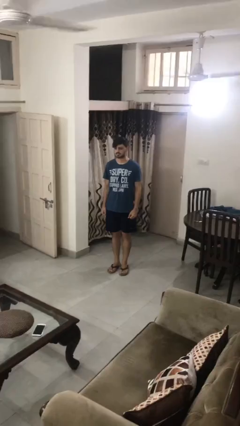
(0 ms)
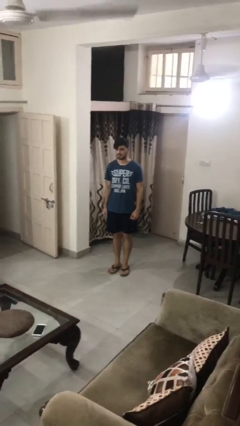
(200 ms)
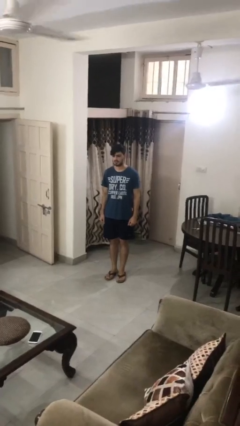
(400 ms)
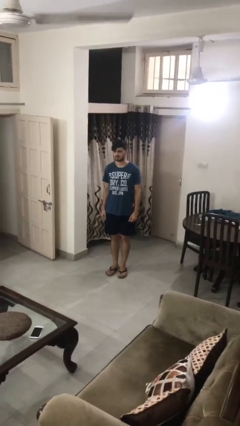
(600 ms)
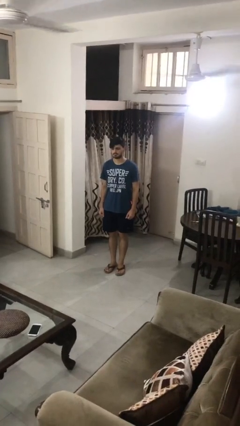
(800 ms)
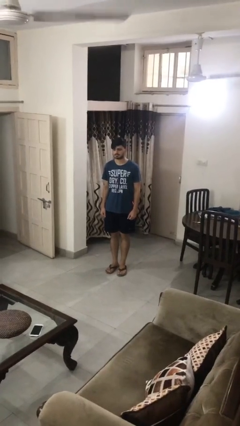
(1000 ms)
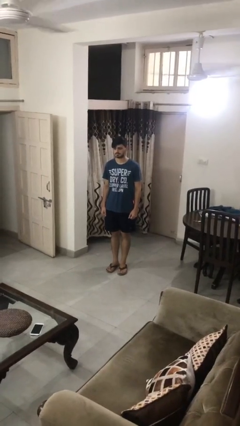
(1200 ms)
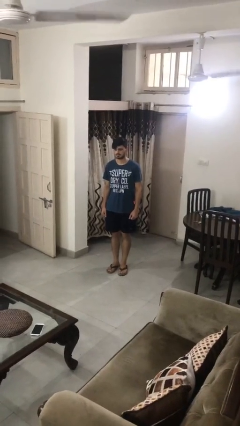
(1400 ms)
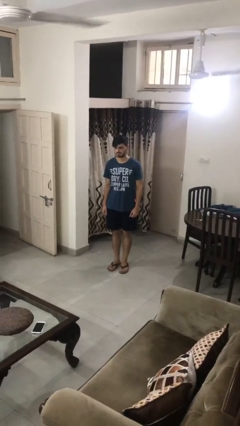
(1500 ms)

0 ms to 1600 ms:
person bows

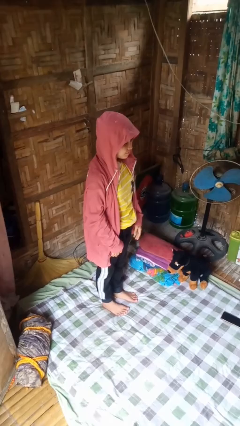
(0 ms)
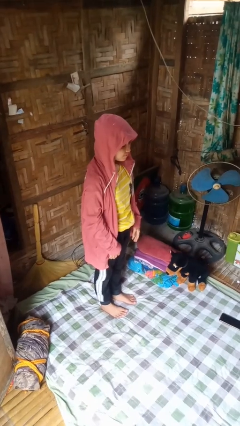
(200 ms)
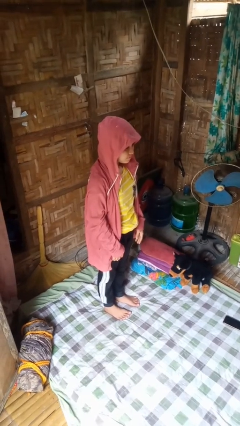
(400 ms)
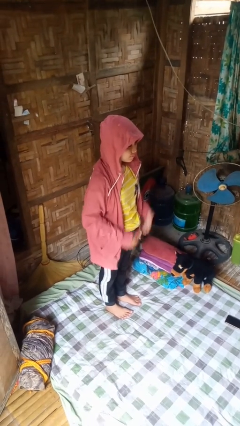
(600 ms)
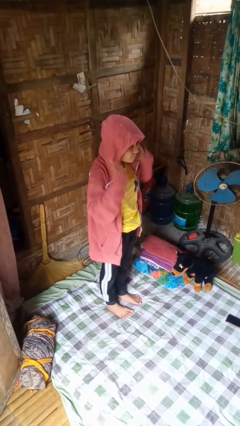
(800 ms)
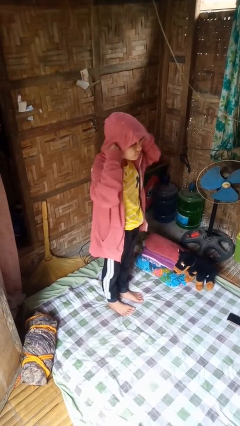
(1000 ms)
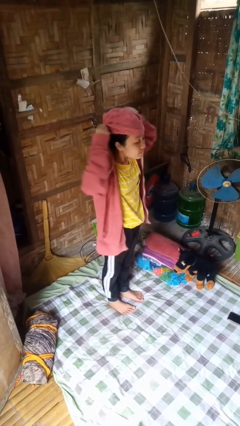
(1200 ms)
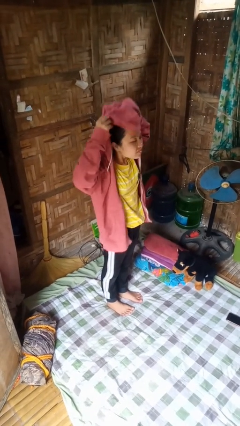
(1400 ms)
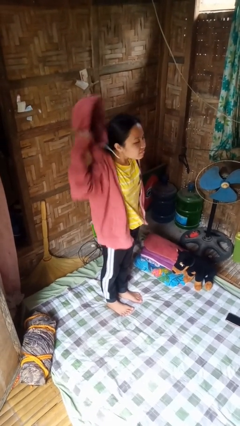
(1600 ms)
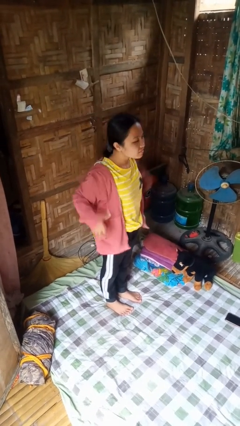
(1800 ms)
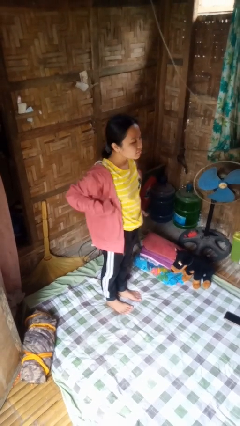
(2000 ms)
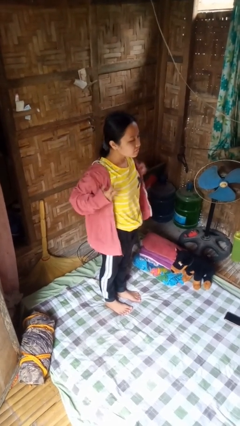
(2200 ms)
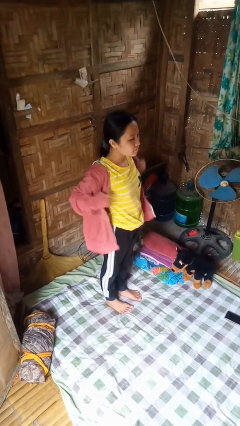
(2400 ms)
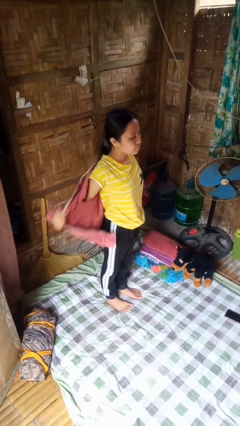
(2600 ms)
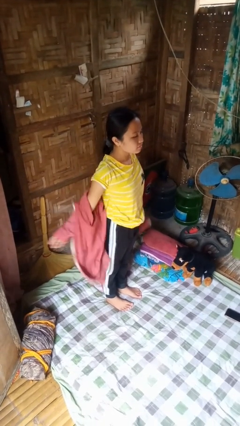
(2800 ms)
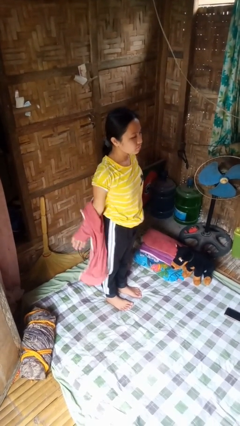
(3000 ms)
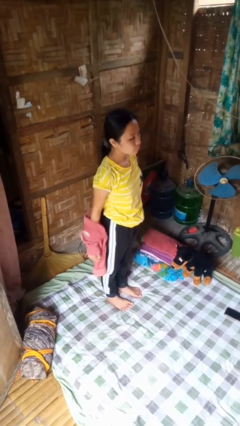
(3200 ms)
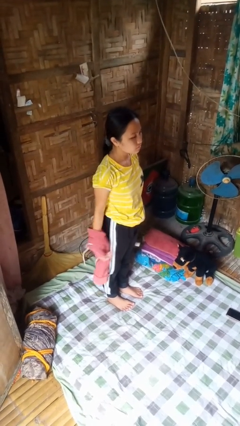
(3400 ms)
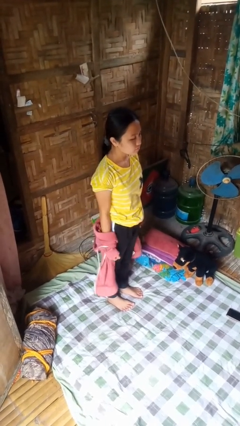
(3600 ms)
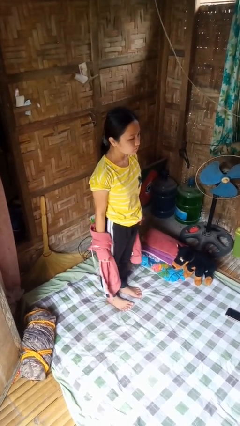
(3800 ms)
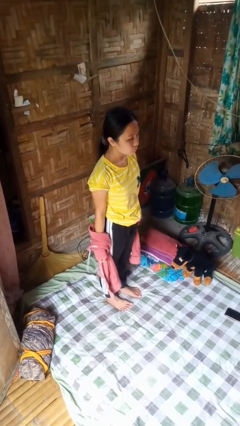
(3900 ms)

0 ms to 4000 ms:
person takes off hoodie

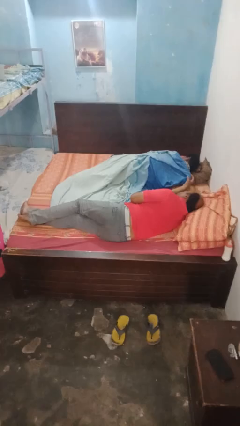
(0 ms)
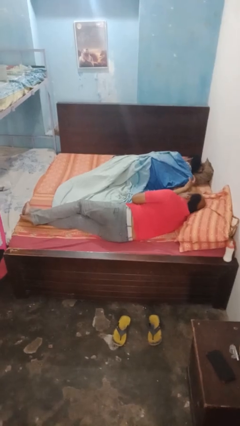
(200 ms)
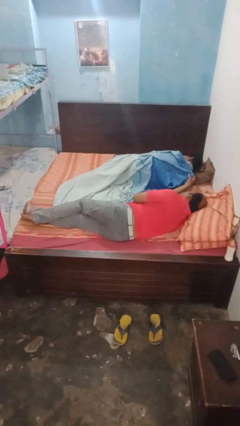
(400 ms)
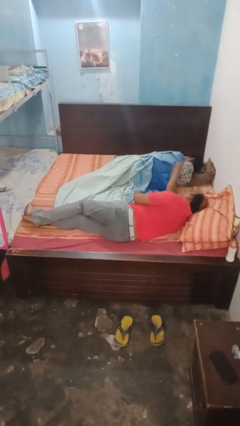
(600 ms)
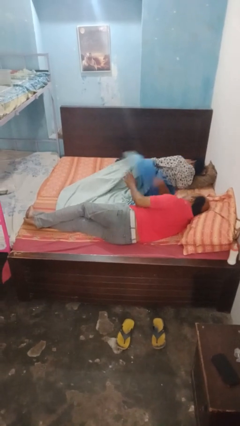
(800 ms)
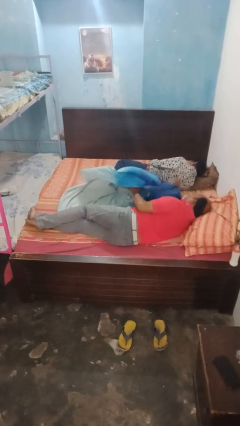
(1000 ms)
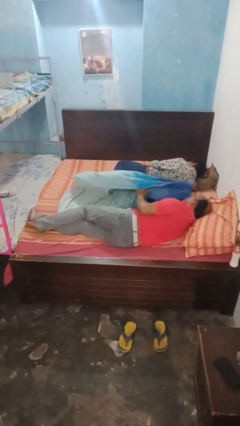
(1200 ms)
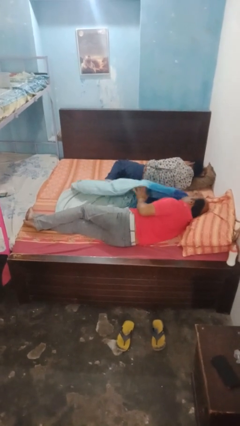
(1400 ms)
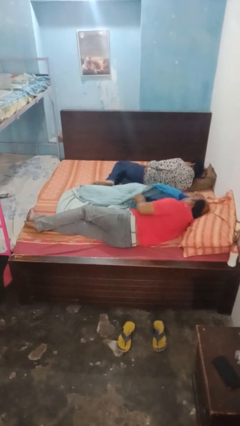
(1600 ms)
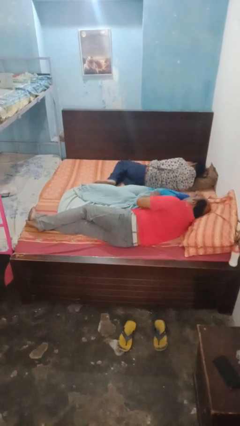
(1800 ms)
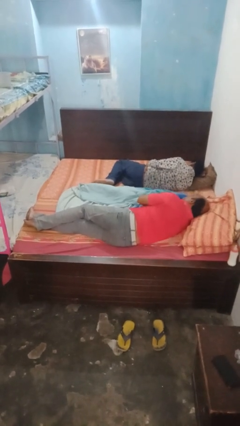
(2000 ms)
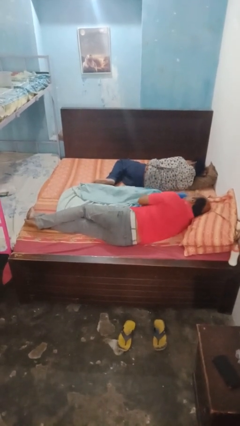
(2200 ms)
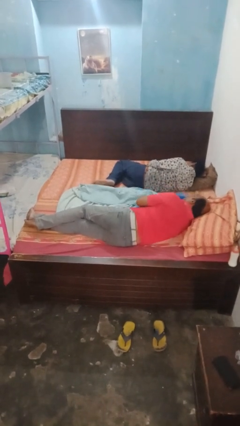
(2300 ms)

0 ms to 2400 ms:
person uncovers friend with blanket

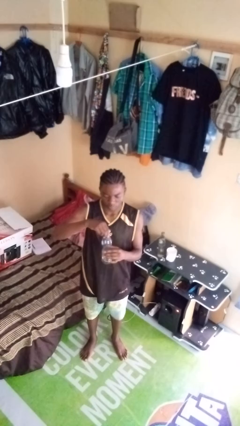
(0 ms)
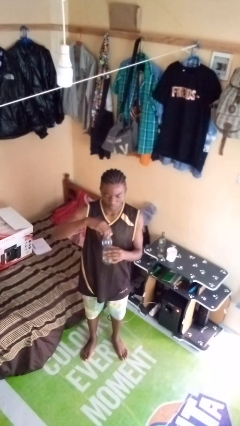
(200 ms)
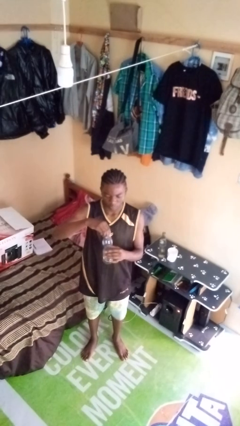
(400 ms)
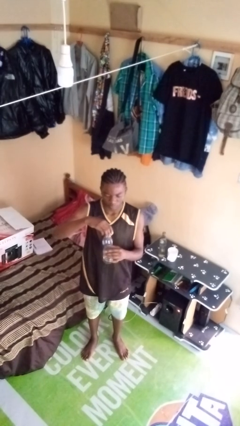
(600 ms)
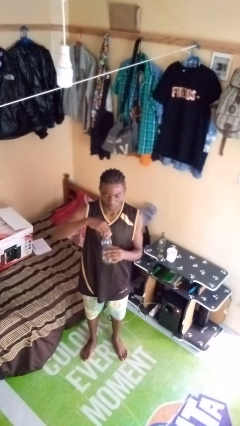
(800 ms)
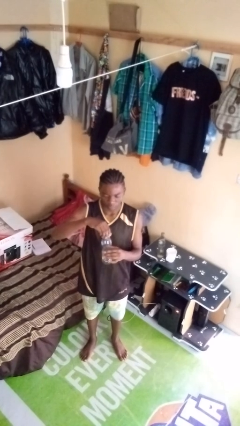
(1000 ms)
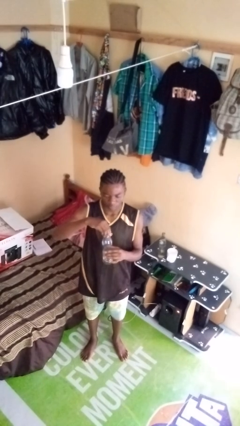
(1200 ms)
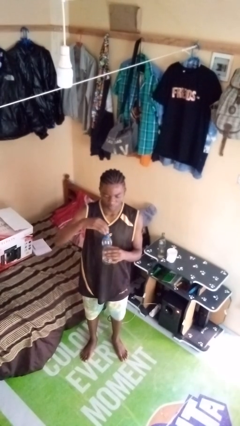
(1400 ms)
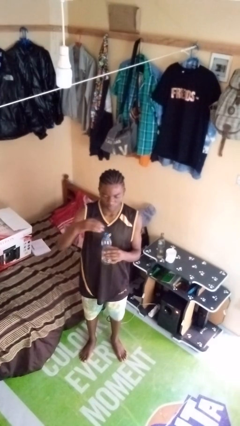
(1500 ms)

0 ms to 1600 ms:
person unscrews lid from bottle

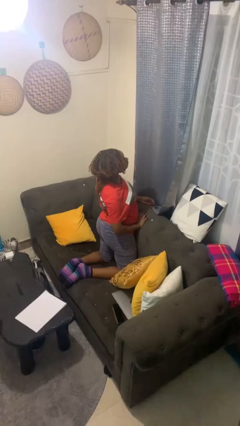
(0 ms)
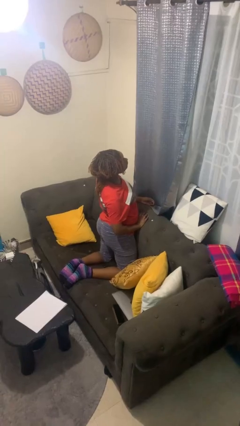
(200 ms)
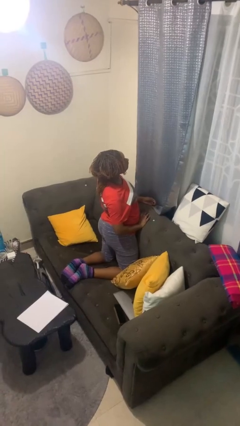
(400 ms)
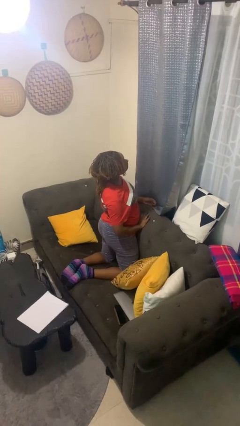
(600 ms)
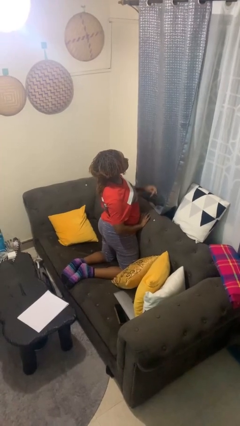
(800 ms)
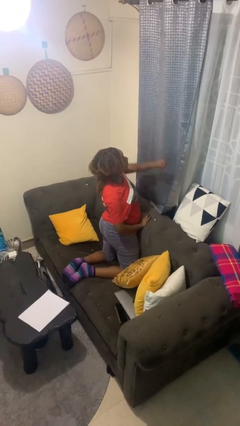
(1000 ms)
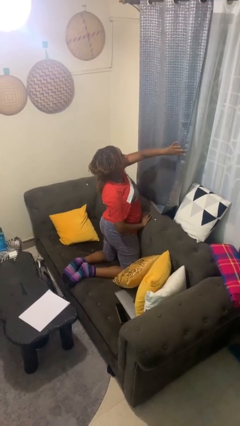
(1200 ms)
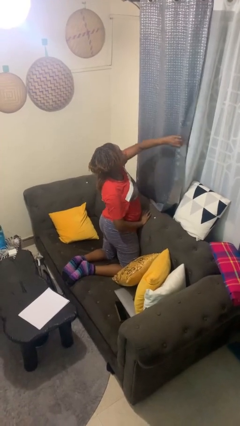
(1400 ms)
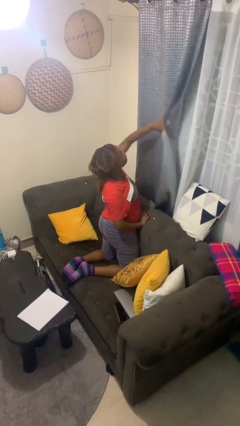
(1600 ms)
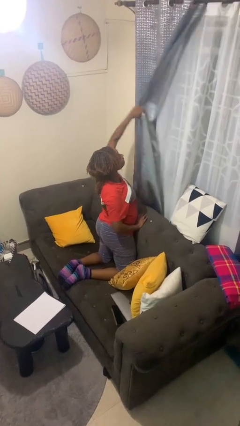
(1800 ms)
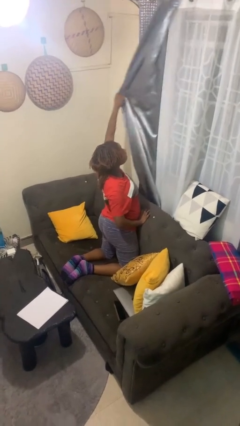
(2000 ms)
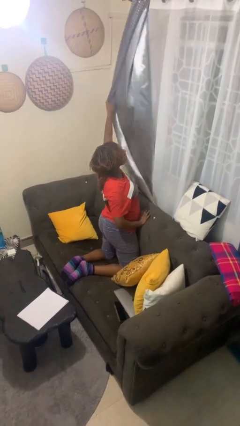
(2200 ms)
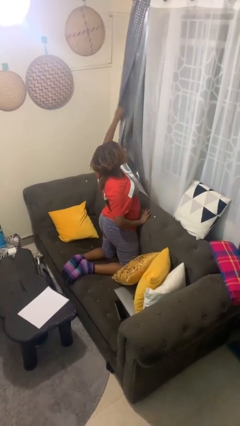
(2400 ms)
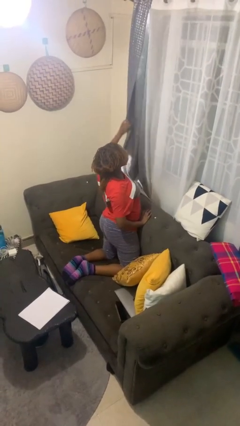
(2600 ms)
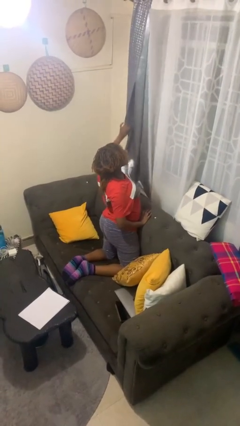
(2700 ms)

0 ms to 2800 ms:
person opens curtains

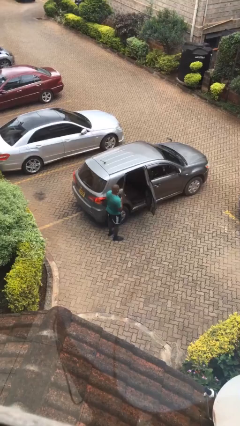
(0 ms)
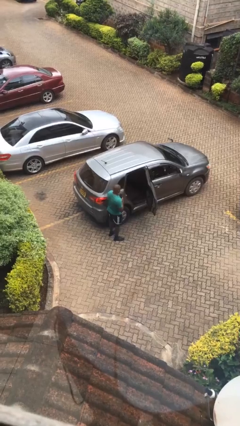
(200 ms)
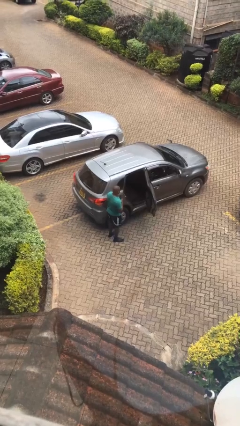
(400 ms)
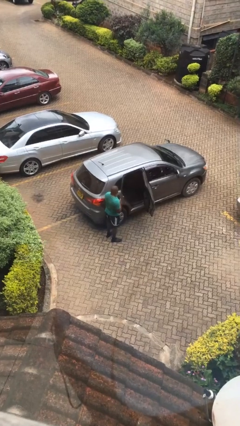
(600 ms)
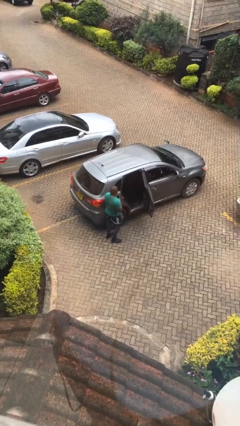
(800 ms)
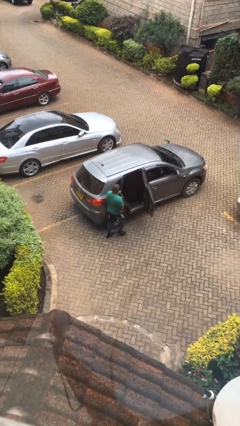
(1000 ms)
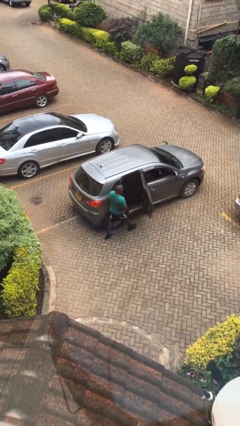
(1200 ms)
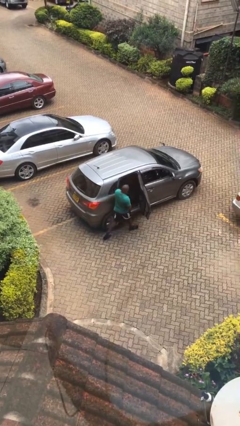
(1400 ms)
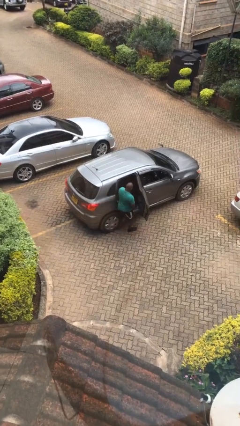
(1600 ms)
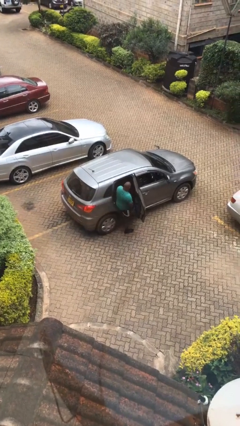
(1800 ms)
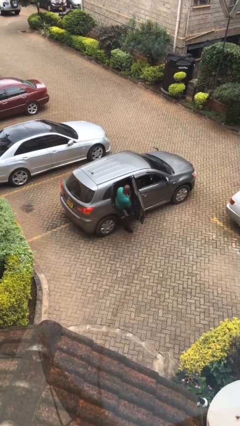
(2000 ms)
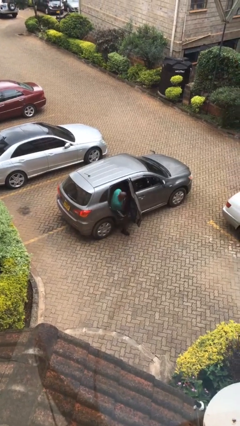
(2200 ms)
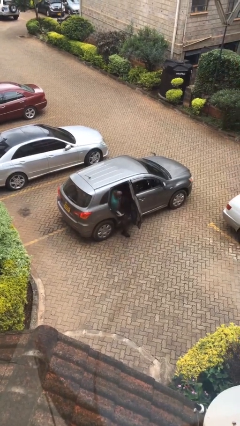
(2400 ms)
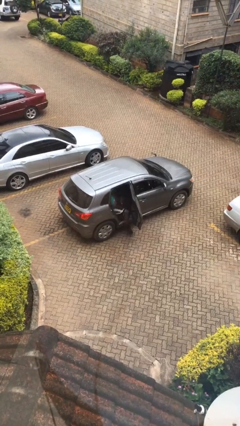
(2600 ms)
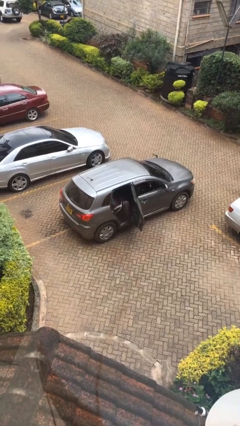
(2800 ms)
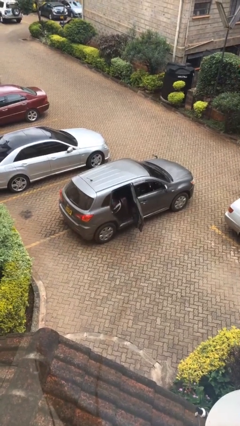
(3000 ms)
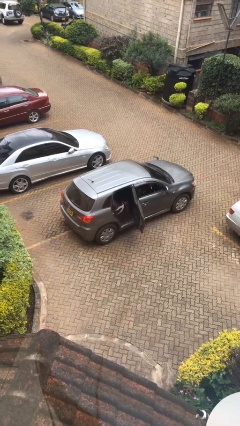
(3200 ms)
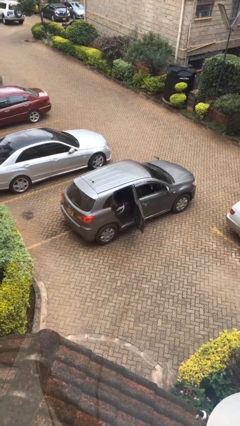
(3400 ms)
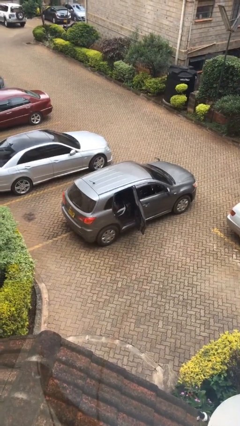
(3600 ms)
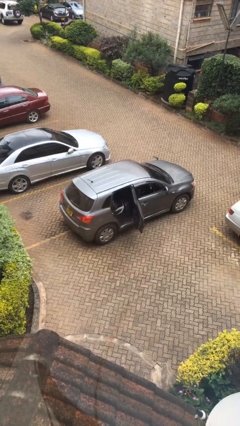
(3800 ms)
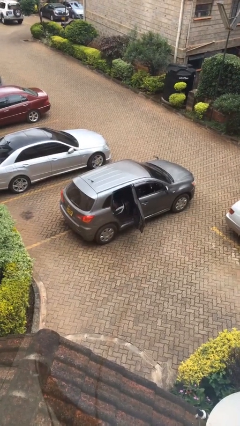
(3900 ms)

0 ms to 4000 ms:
person enters car

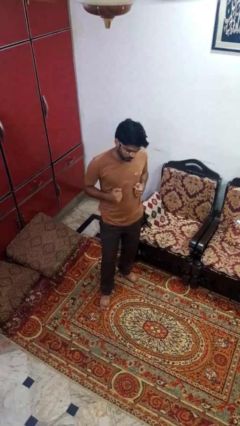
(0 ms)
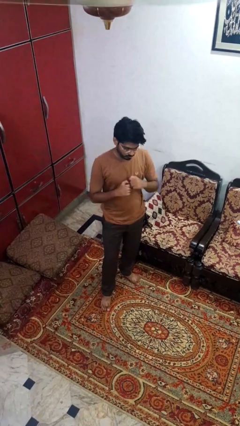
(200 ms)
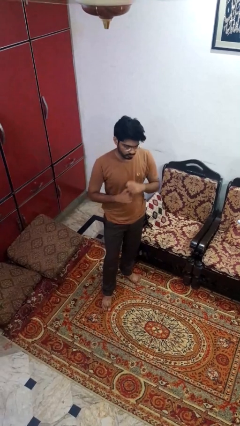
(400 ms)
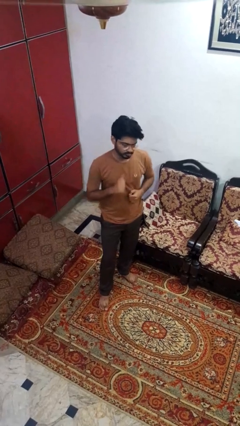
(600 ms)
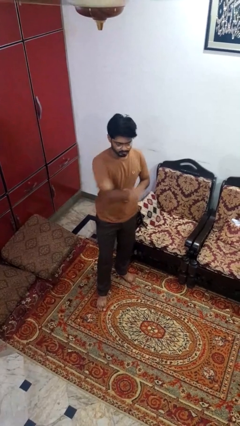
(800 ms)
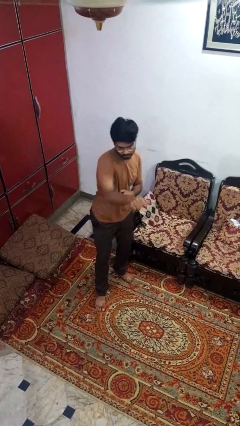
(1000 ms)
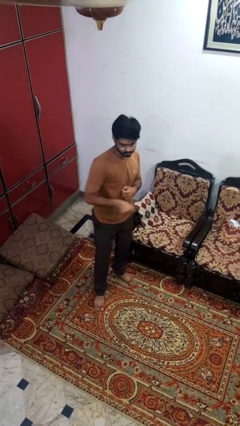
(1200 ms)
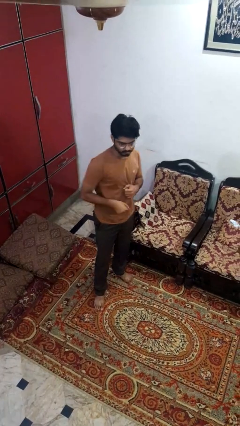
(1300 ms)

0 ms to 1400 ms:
person punches
